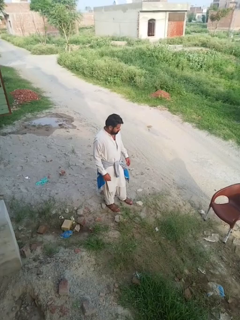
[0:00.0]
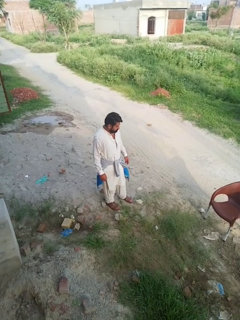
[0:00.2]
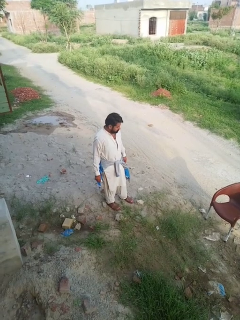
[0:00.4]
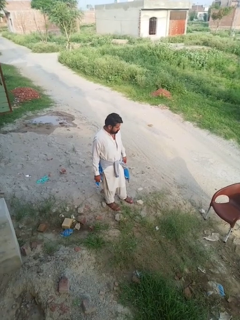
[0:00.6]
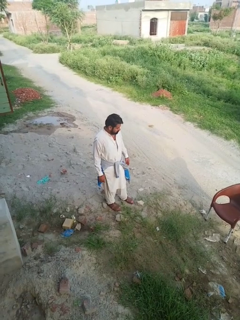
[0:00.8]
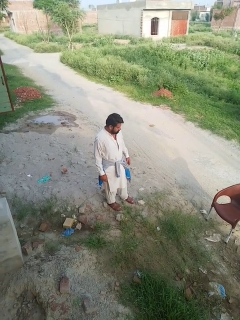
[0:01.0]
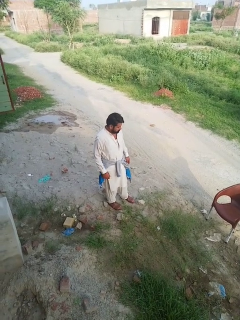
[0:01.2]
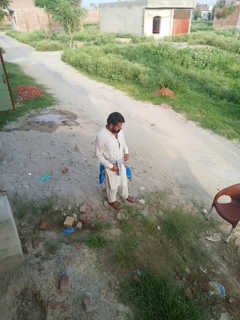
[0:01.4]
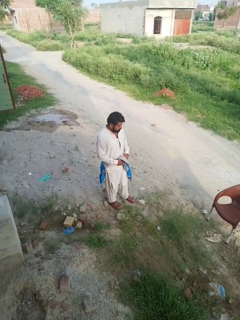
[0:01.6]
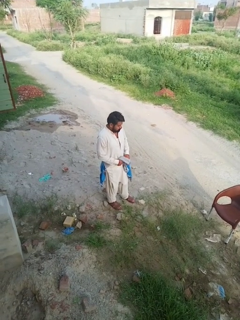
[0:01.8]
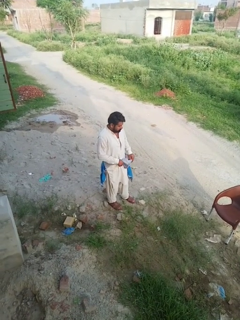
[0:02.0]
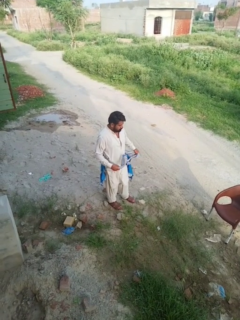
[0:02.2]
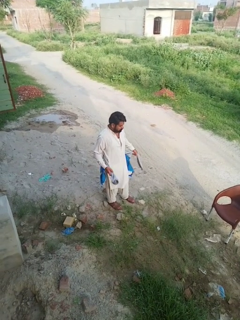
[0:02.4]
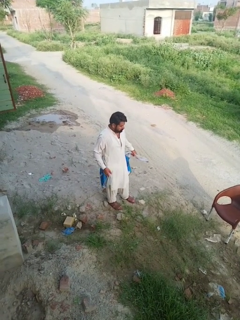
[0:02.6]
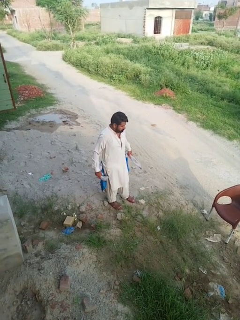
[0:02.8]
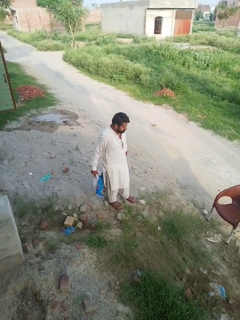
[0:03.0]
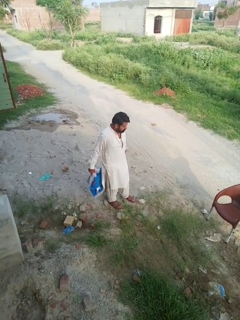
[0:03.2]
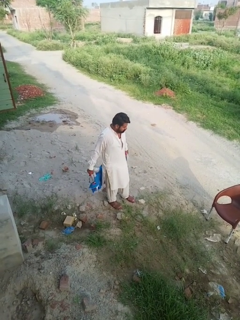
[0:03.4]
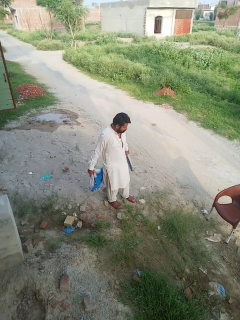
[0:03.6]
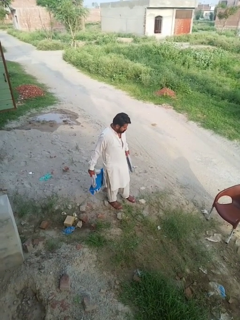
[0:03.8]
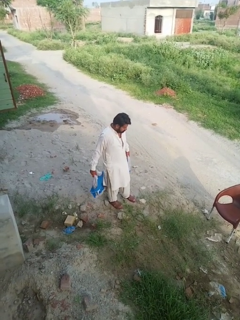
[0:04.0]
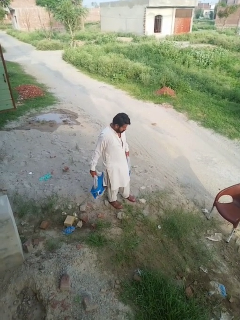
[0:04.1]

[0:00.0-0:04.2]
person unties jacket around waist

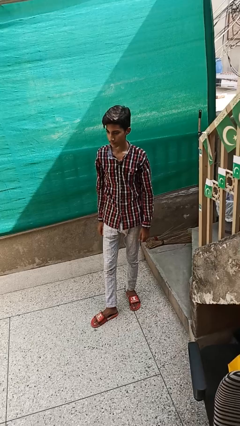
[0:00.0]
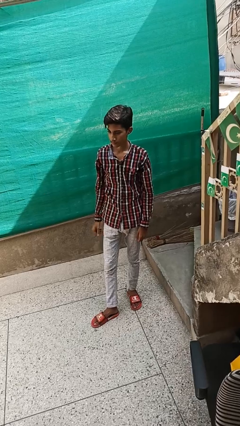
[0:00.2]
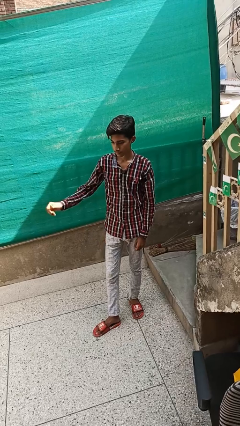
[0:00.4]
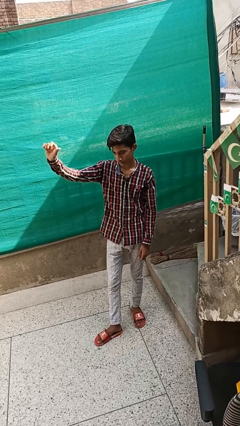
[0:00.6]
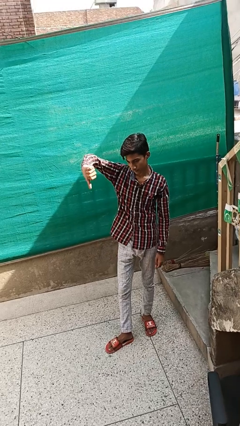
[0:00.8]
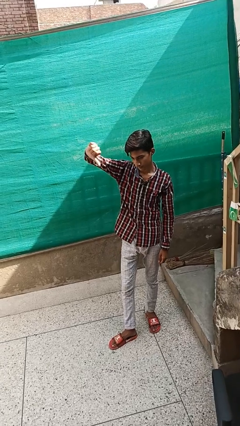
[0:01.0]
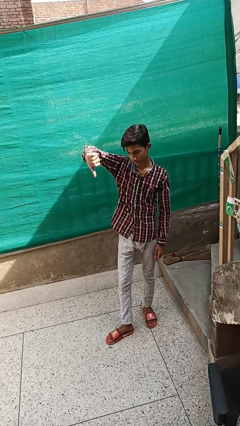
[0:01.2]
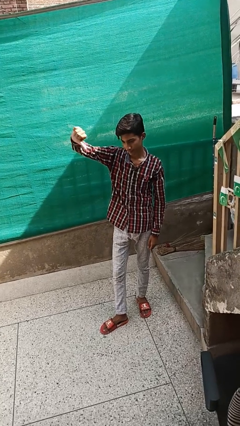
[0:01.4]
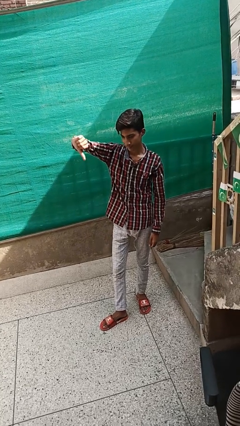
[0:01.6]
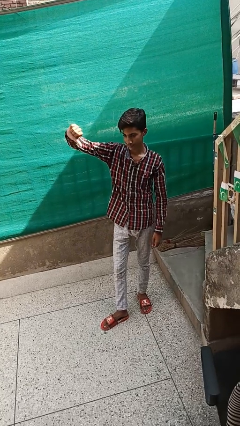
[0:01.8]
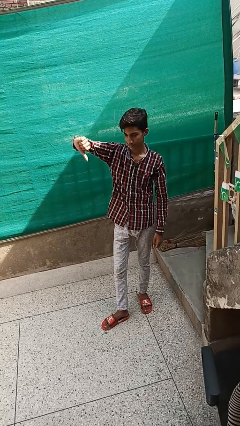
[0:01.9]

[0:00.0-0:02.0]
person gestures thumbs down

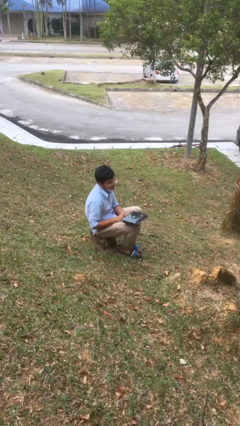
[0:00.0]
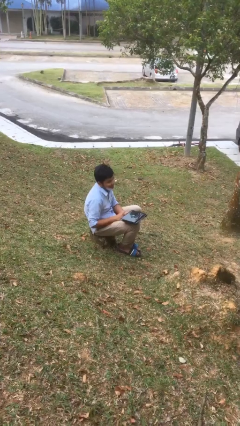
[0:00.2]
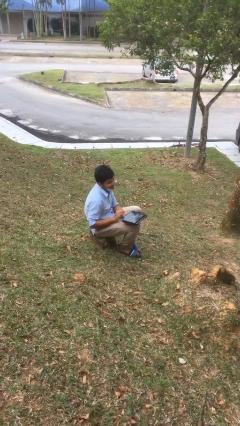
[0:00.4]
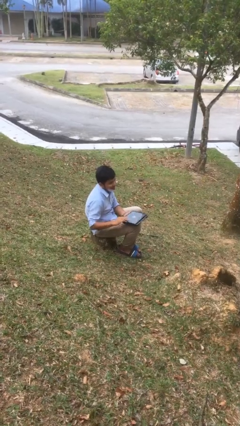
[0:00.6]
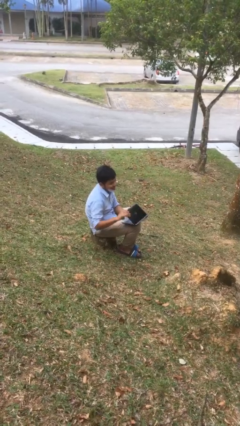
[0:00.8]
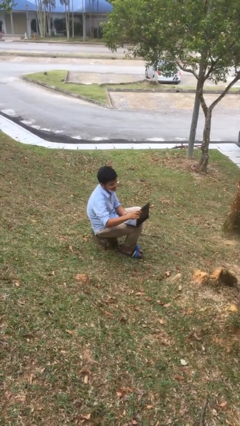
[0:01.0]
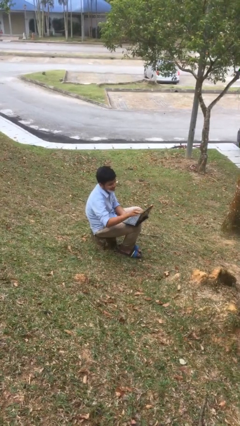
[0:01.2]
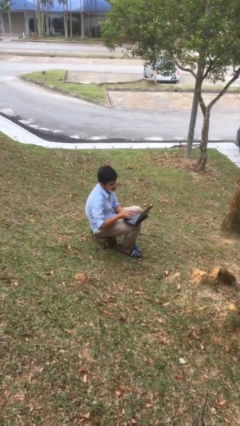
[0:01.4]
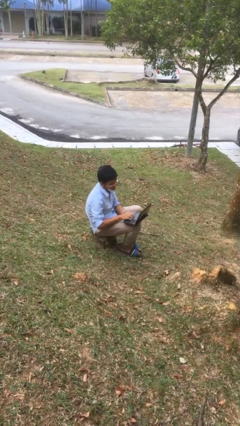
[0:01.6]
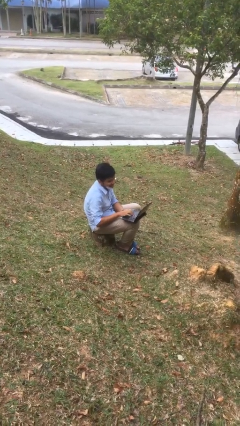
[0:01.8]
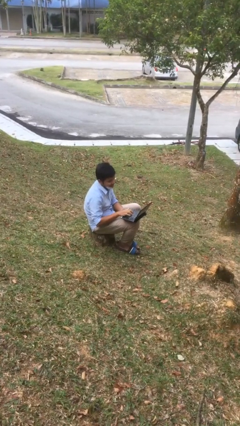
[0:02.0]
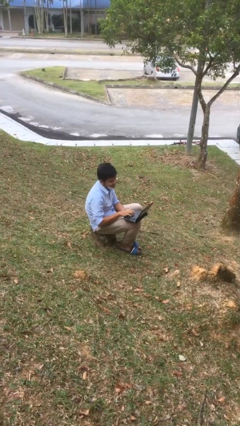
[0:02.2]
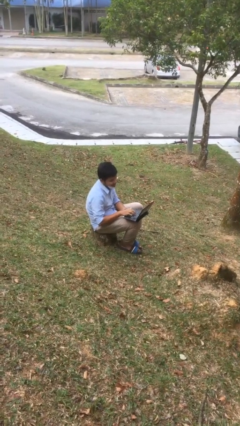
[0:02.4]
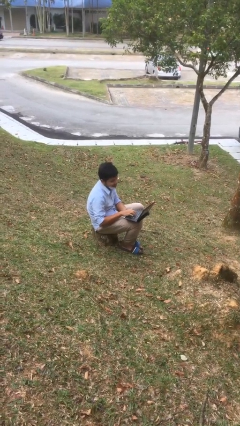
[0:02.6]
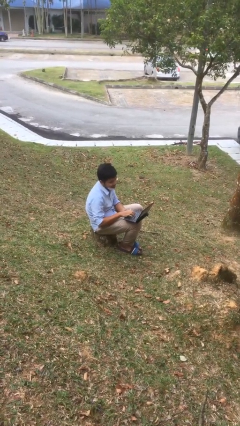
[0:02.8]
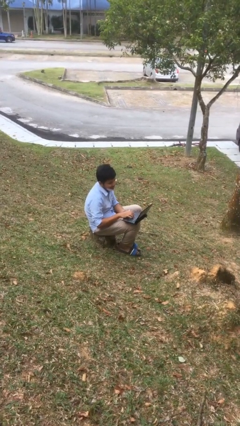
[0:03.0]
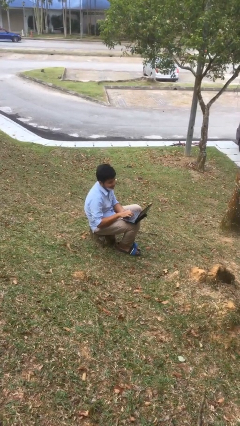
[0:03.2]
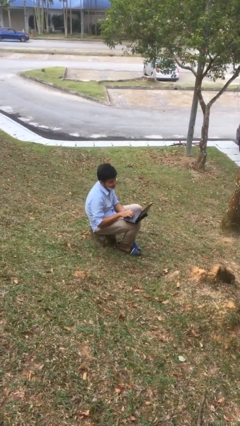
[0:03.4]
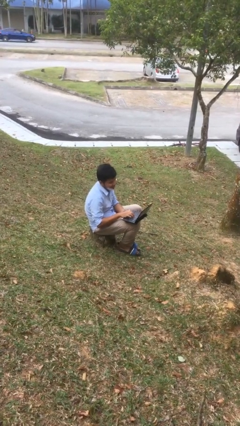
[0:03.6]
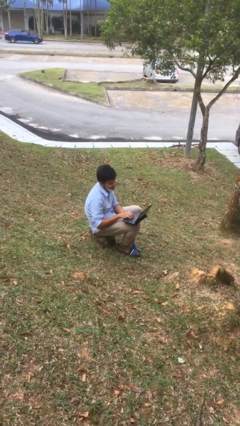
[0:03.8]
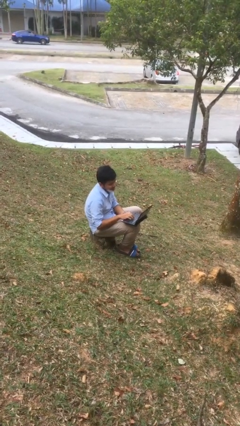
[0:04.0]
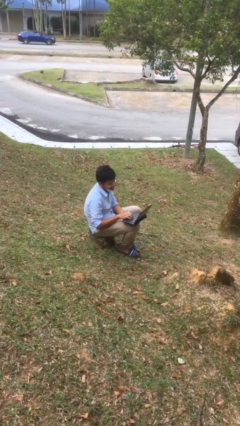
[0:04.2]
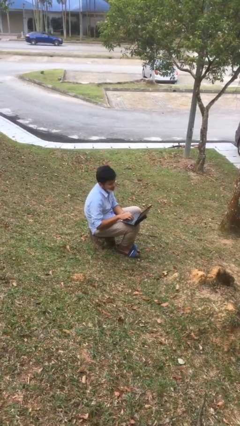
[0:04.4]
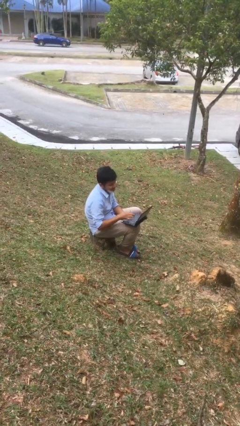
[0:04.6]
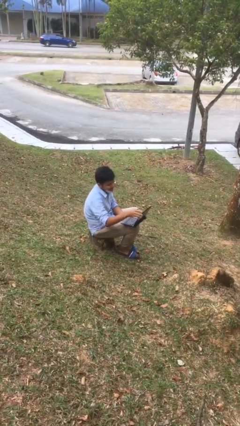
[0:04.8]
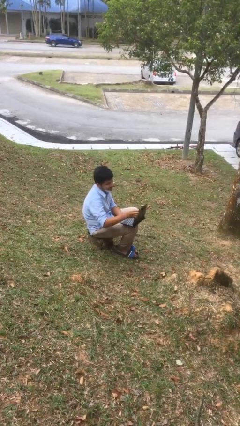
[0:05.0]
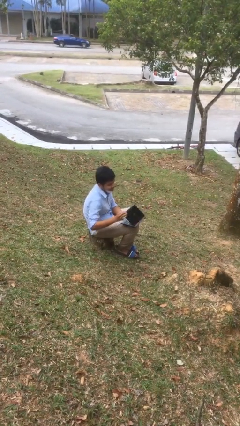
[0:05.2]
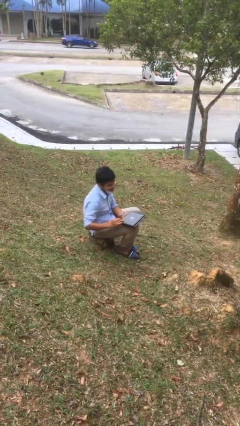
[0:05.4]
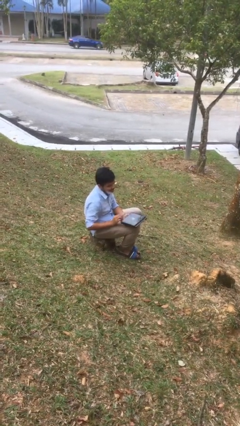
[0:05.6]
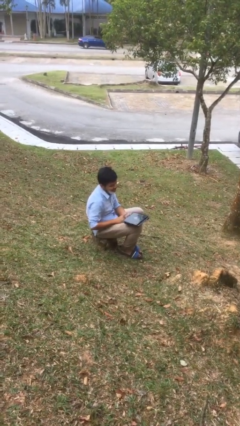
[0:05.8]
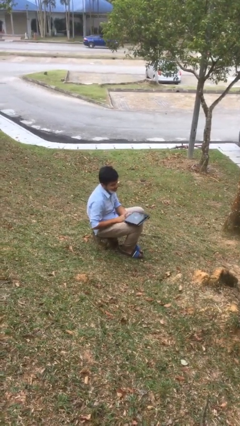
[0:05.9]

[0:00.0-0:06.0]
person interacts with laptop

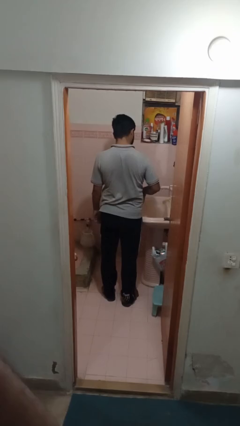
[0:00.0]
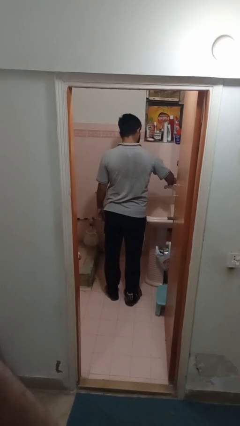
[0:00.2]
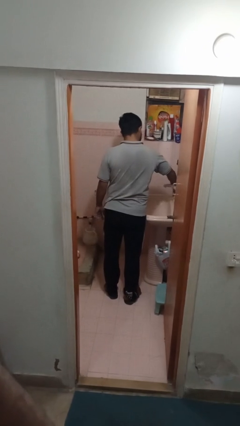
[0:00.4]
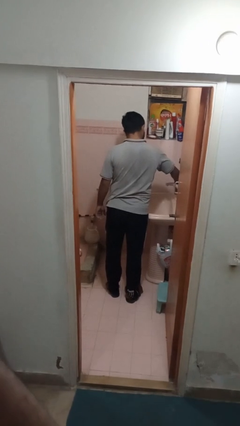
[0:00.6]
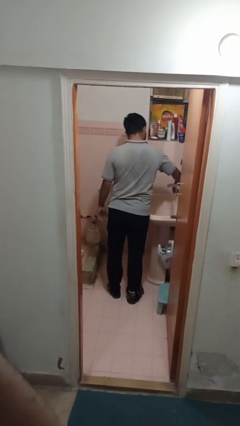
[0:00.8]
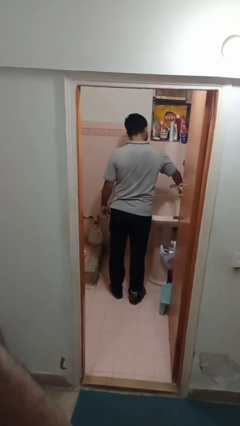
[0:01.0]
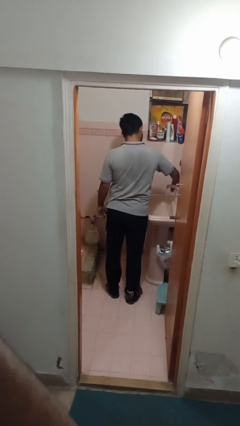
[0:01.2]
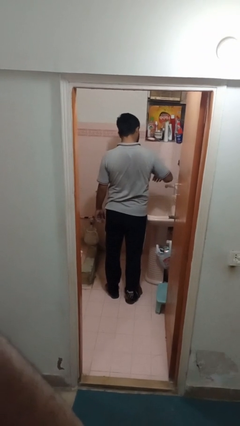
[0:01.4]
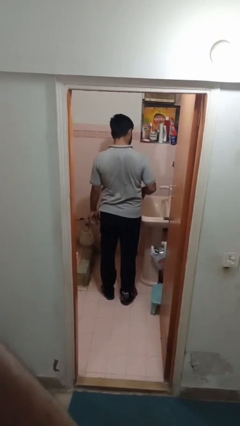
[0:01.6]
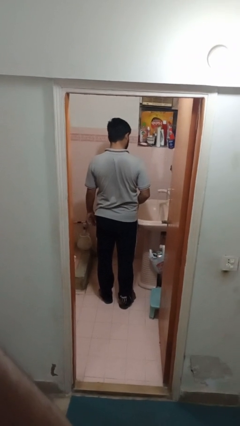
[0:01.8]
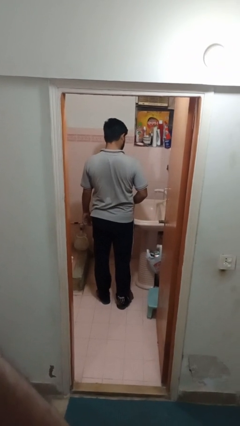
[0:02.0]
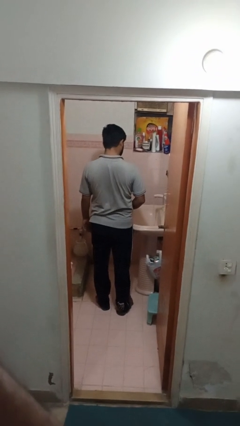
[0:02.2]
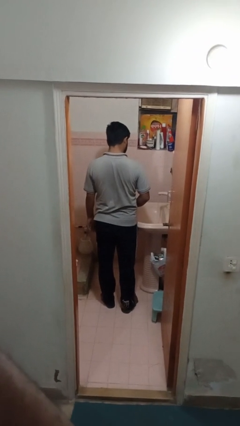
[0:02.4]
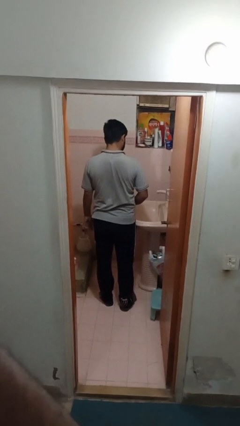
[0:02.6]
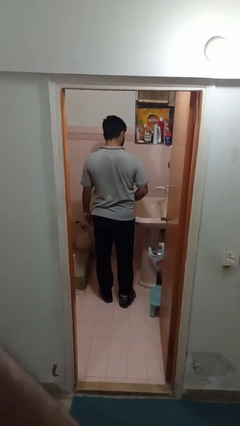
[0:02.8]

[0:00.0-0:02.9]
person turns on faucet

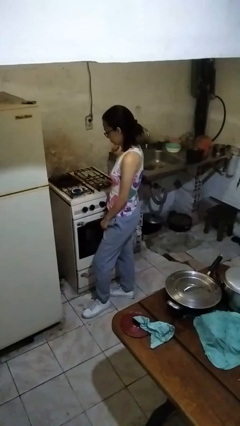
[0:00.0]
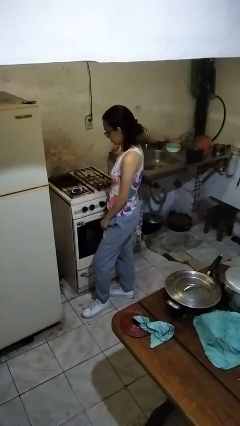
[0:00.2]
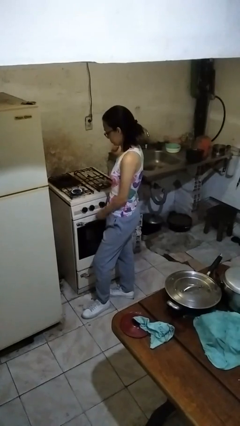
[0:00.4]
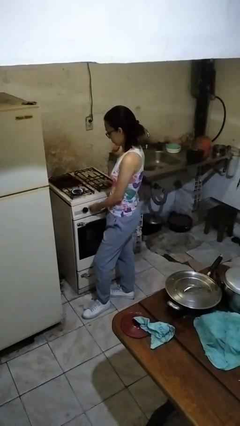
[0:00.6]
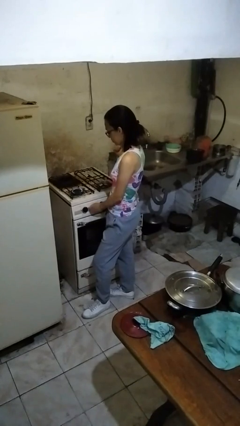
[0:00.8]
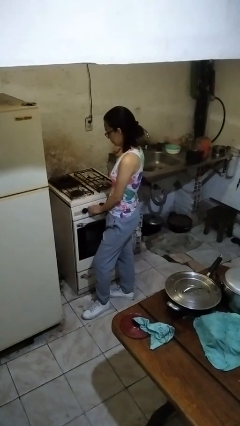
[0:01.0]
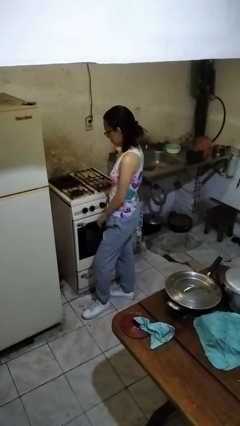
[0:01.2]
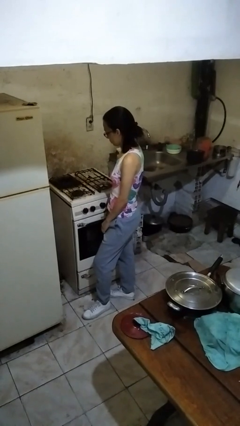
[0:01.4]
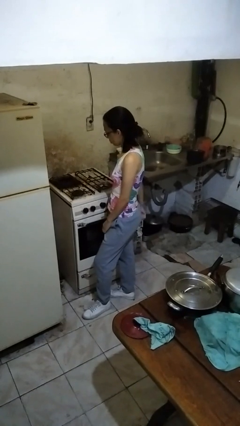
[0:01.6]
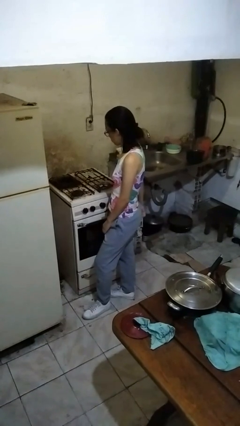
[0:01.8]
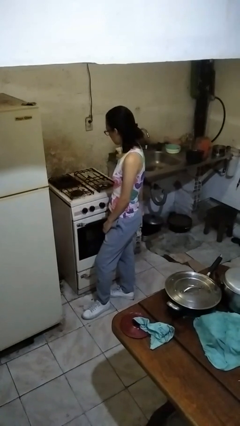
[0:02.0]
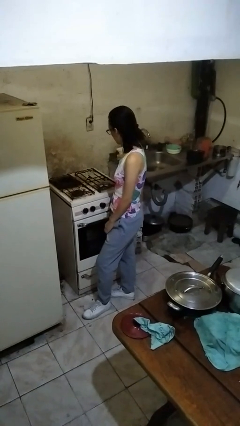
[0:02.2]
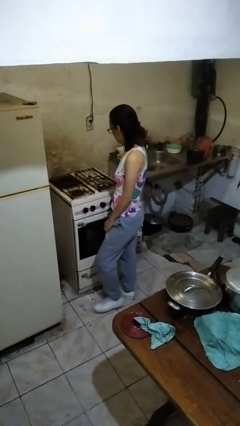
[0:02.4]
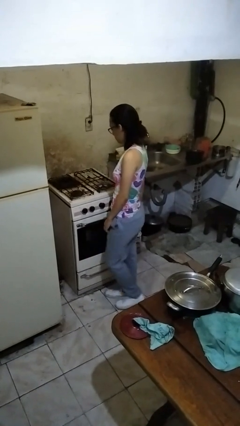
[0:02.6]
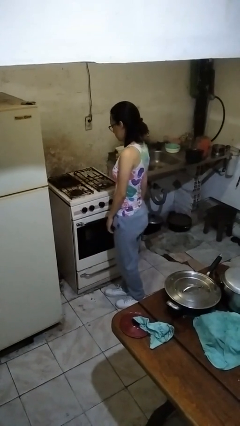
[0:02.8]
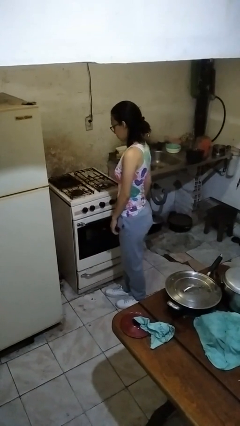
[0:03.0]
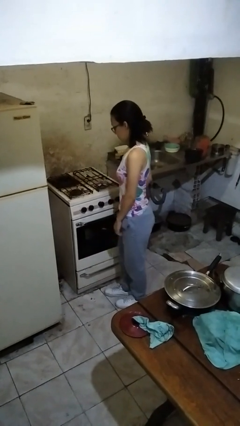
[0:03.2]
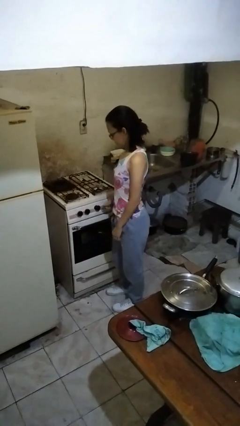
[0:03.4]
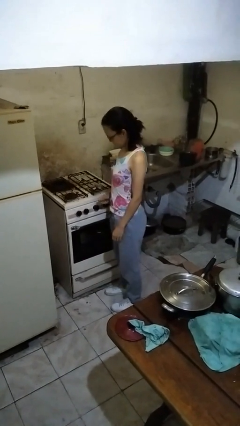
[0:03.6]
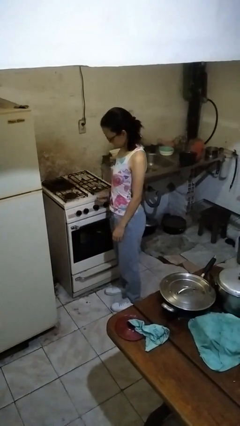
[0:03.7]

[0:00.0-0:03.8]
person turns off stovetop
